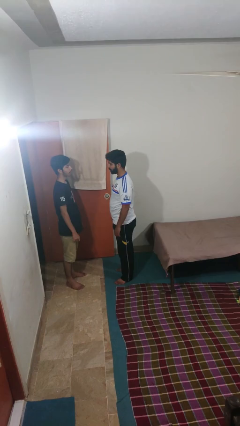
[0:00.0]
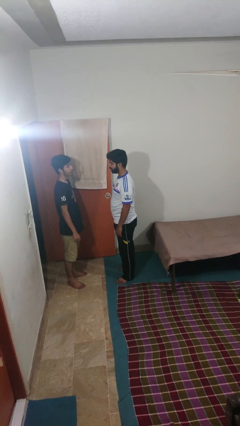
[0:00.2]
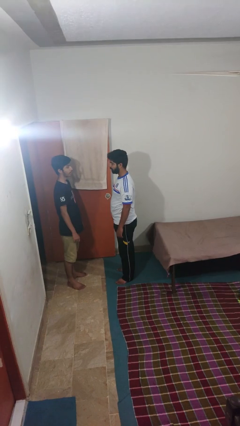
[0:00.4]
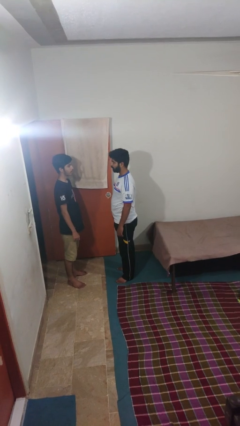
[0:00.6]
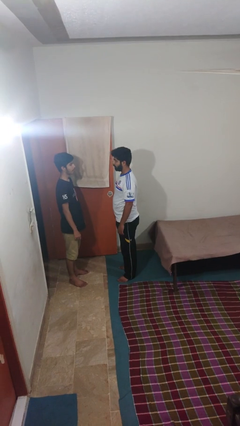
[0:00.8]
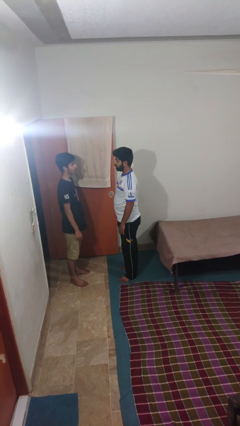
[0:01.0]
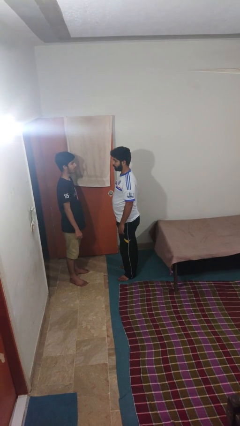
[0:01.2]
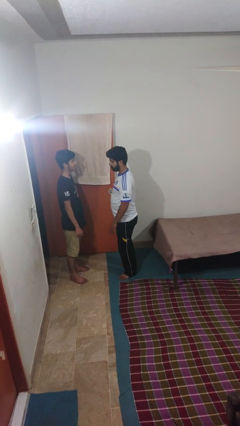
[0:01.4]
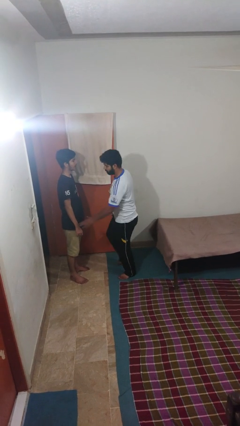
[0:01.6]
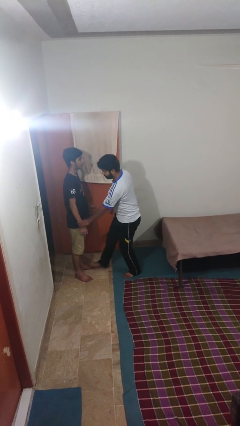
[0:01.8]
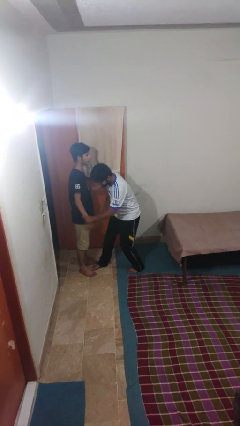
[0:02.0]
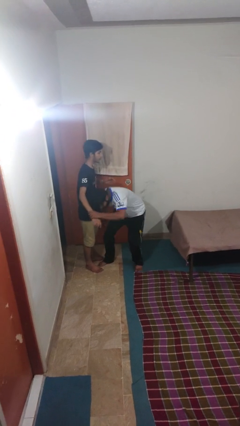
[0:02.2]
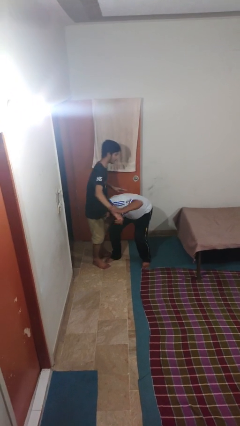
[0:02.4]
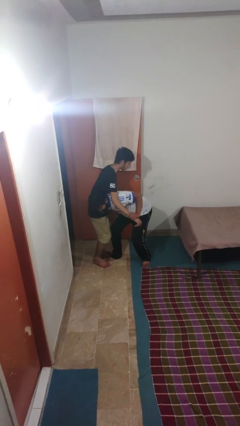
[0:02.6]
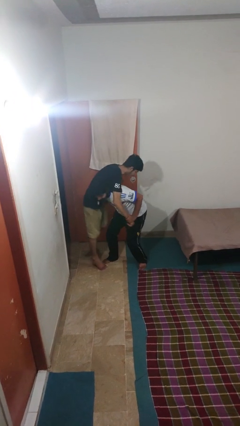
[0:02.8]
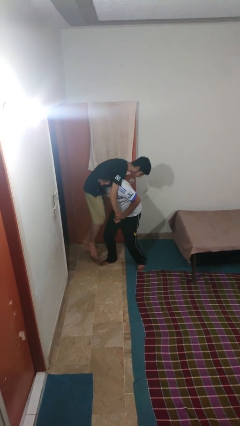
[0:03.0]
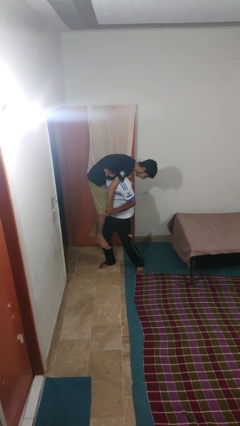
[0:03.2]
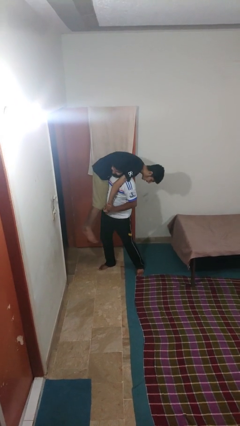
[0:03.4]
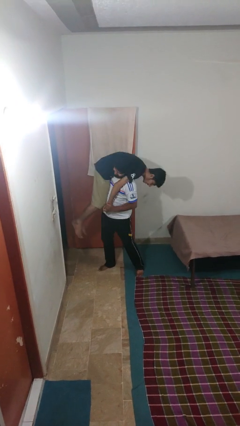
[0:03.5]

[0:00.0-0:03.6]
person carries person over shoulder

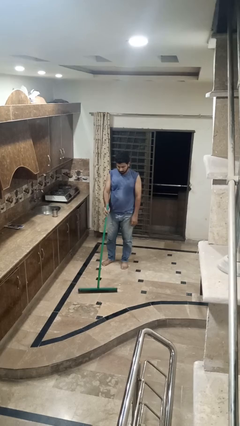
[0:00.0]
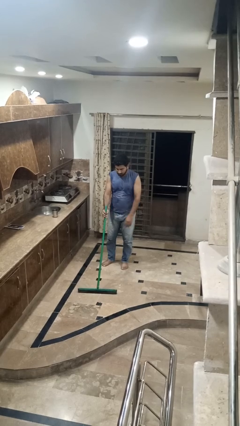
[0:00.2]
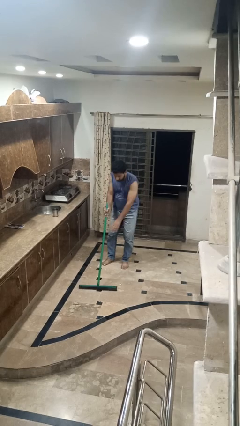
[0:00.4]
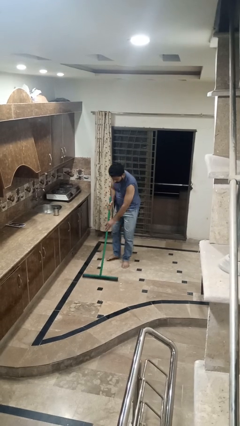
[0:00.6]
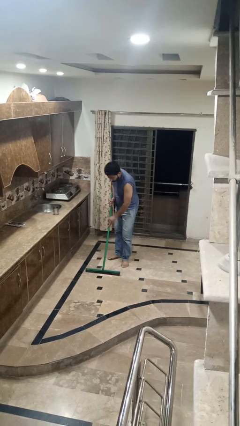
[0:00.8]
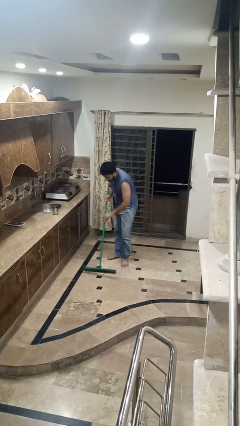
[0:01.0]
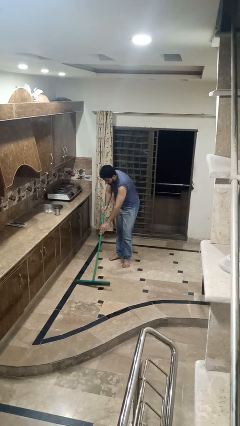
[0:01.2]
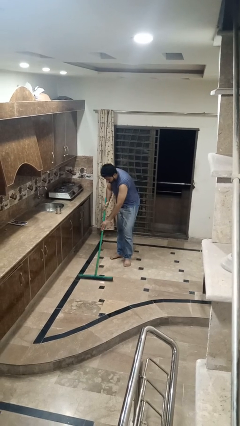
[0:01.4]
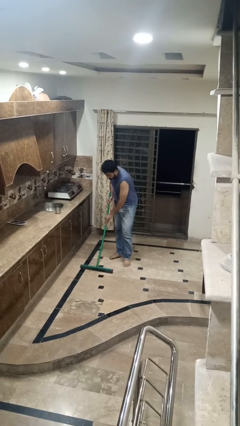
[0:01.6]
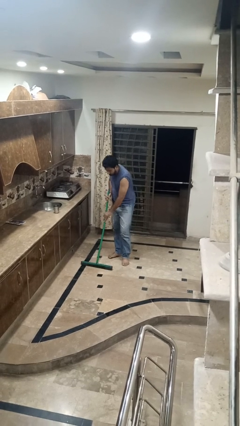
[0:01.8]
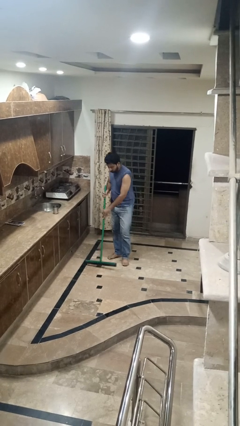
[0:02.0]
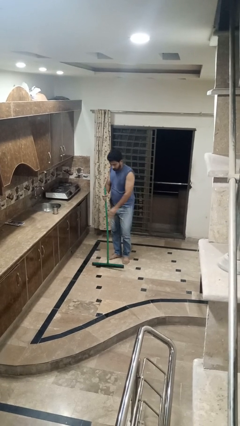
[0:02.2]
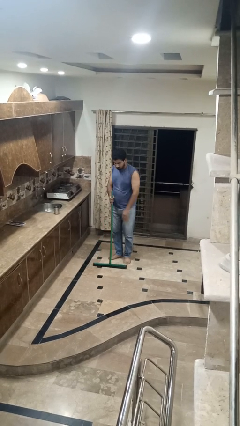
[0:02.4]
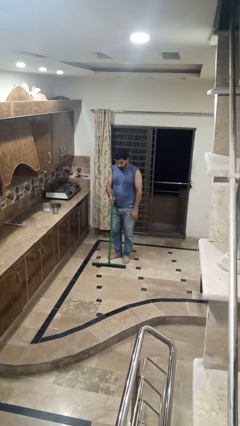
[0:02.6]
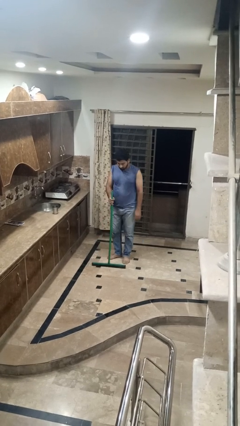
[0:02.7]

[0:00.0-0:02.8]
person mops

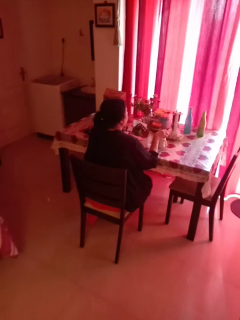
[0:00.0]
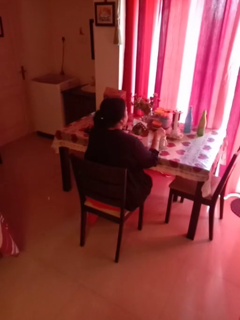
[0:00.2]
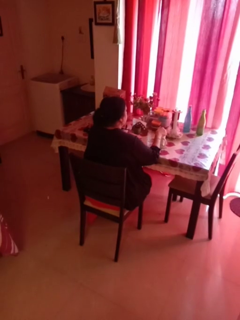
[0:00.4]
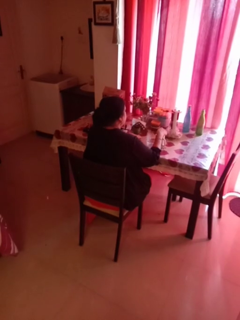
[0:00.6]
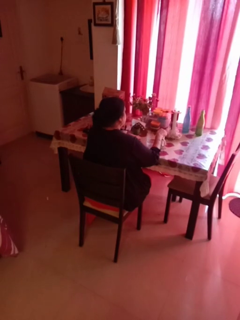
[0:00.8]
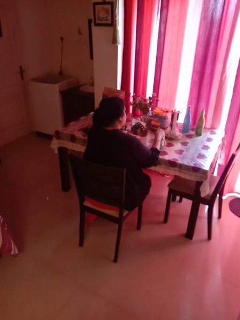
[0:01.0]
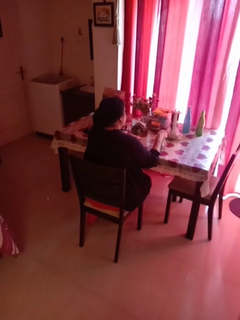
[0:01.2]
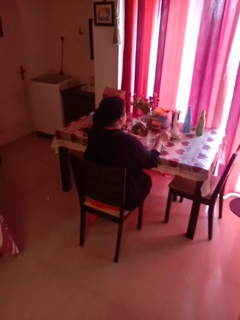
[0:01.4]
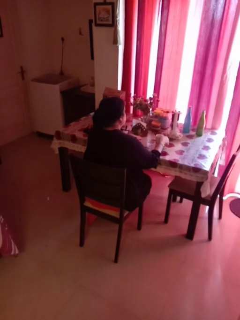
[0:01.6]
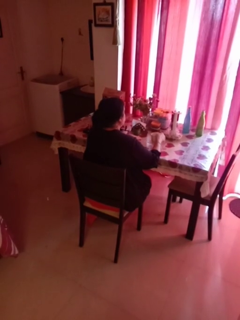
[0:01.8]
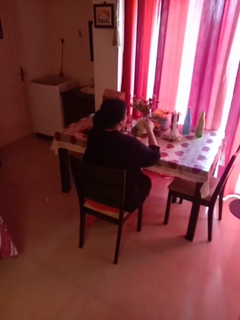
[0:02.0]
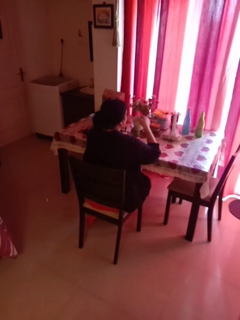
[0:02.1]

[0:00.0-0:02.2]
person stirs mug

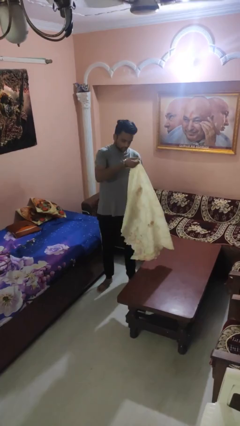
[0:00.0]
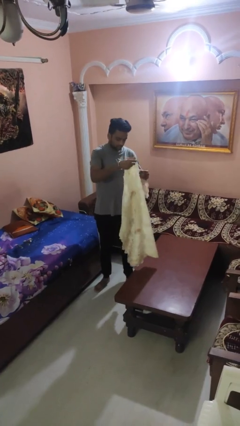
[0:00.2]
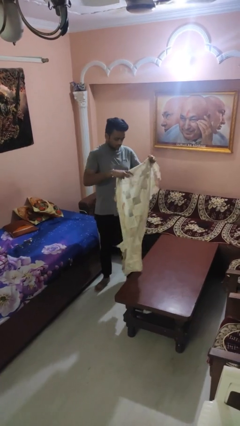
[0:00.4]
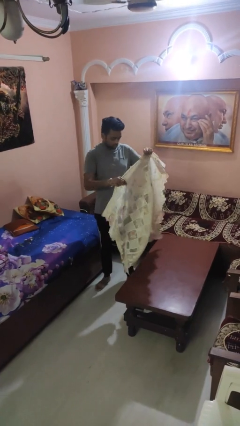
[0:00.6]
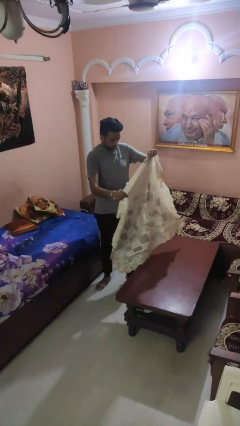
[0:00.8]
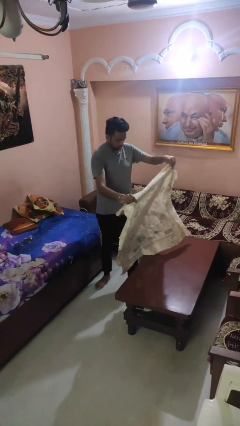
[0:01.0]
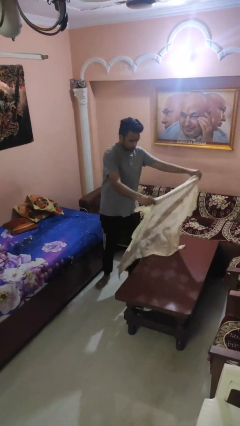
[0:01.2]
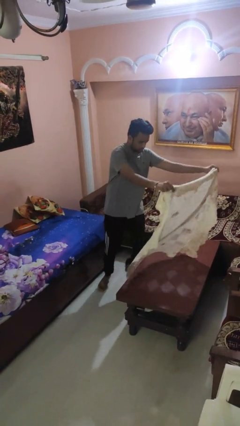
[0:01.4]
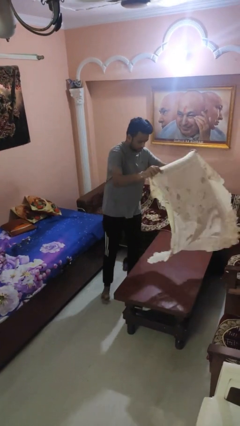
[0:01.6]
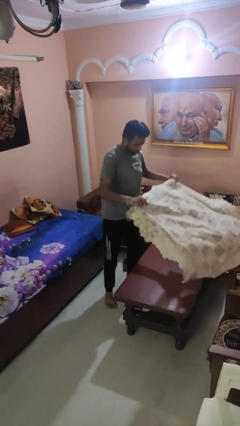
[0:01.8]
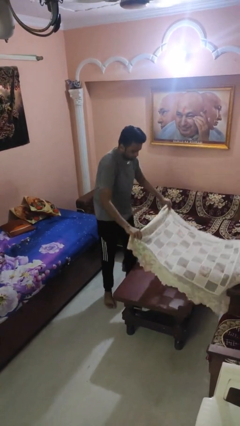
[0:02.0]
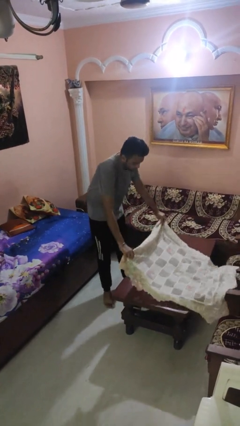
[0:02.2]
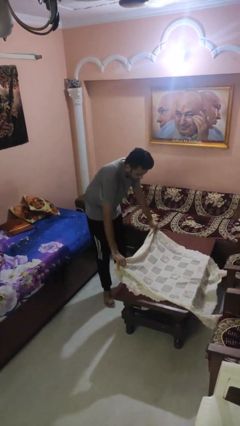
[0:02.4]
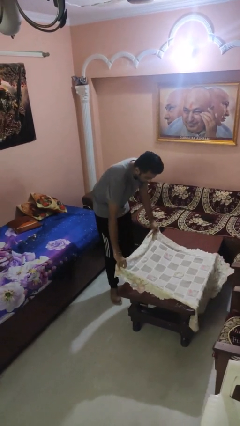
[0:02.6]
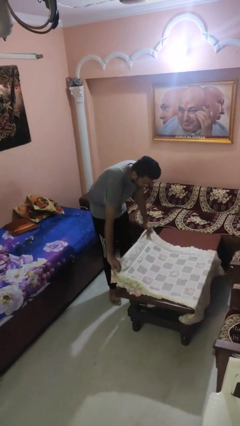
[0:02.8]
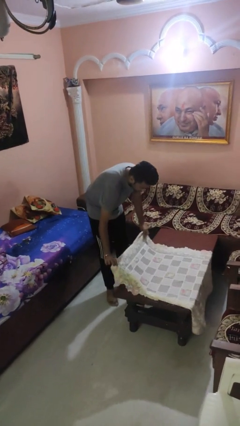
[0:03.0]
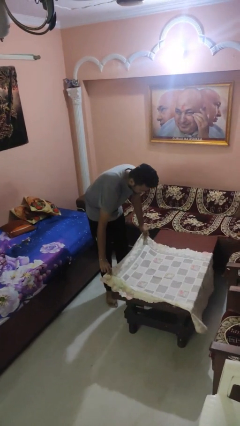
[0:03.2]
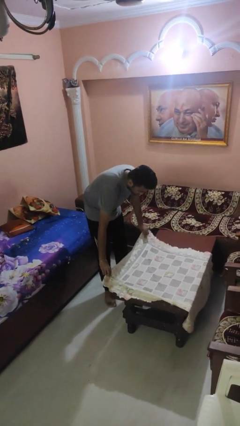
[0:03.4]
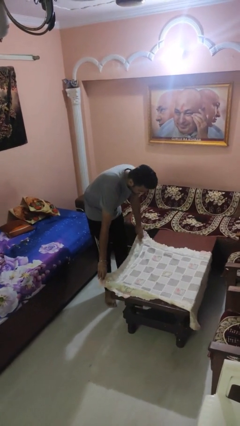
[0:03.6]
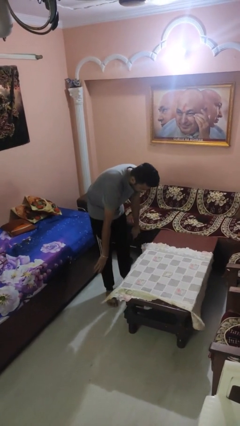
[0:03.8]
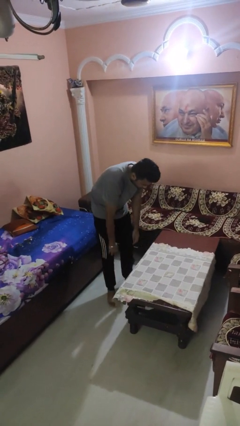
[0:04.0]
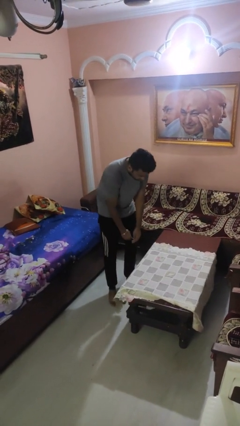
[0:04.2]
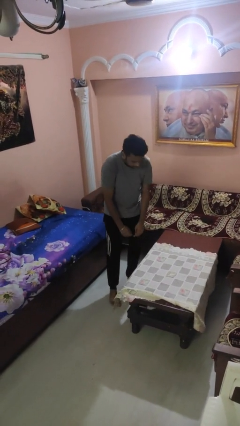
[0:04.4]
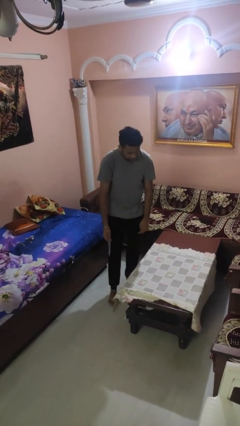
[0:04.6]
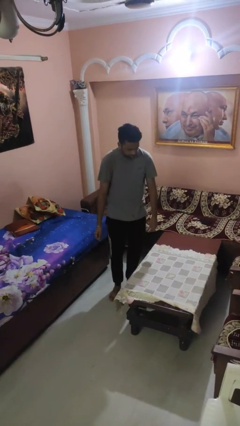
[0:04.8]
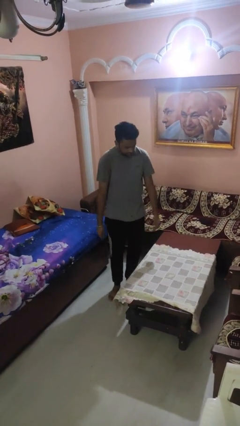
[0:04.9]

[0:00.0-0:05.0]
person spreads tablecloth

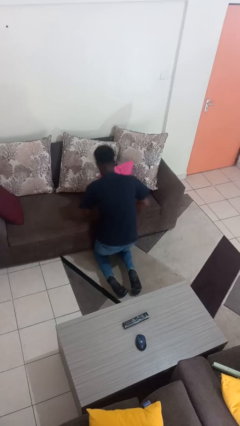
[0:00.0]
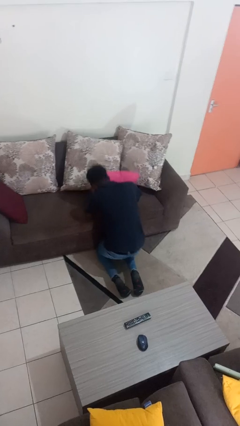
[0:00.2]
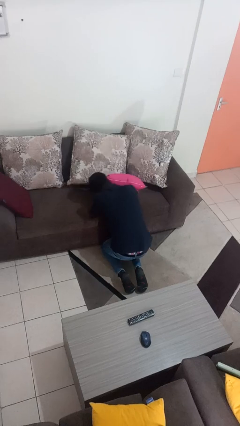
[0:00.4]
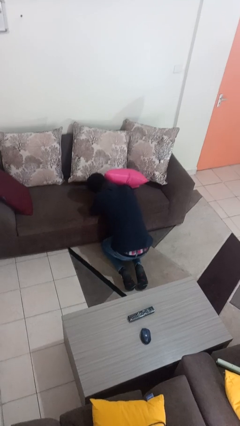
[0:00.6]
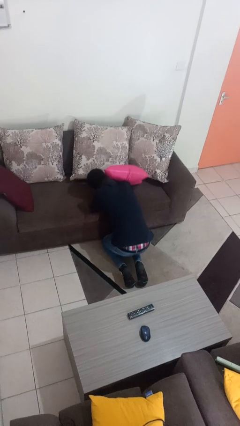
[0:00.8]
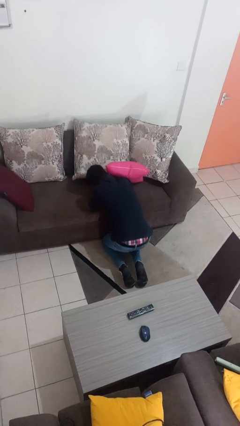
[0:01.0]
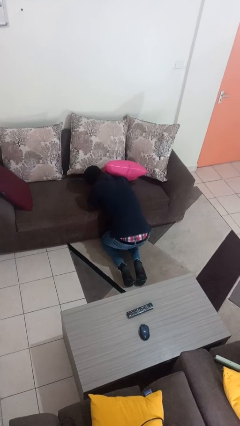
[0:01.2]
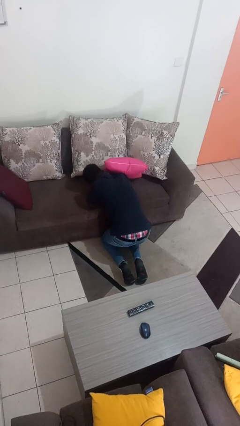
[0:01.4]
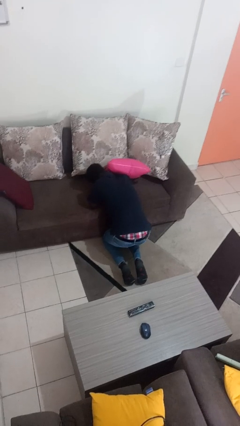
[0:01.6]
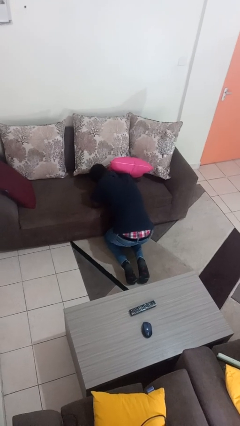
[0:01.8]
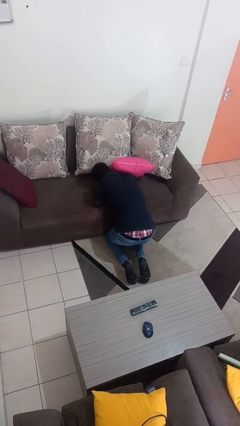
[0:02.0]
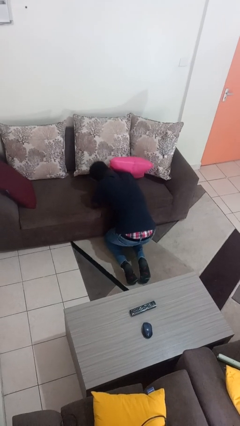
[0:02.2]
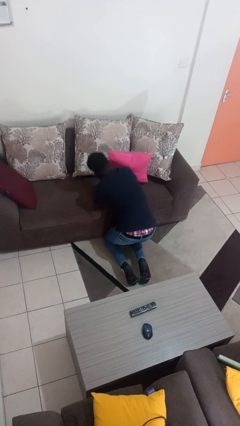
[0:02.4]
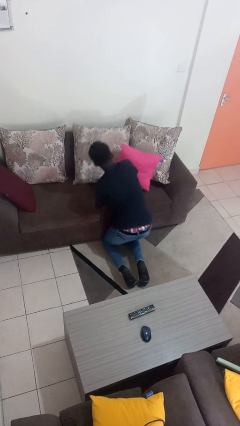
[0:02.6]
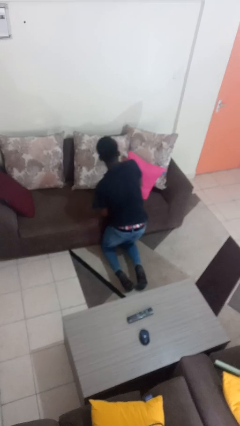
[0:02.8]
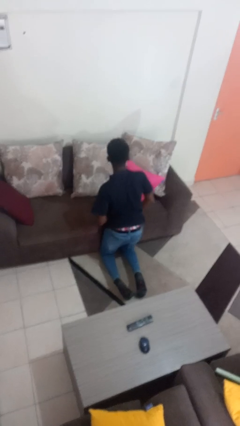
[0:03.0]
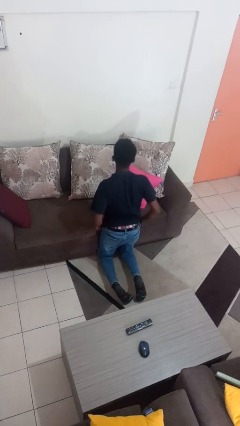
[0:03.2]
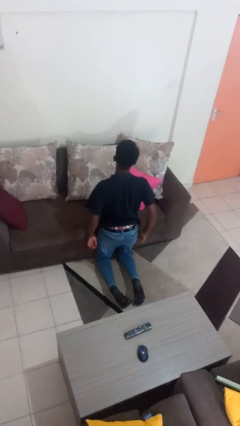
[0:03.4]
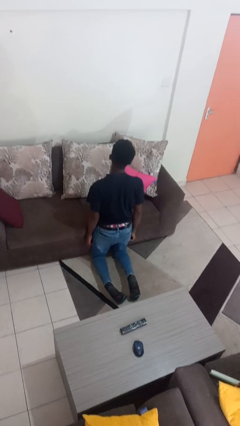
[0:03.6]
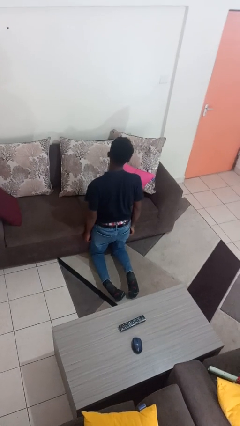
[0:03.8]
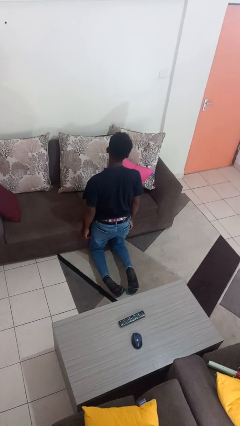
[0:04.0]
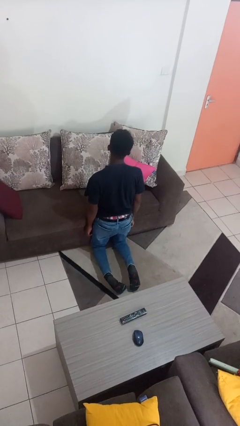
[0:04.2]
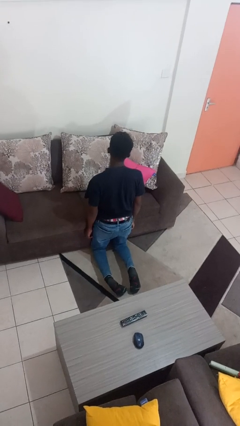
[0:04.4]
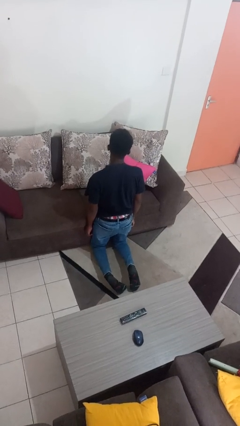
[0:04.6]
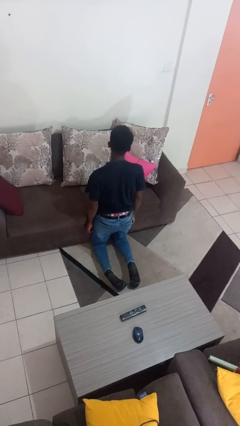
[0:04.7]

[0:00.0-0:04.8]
person searches in couch
